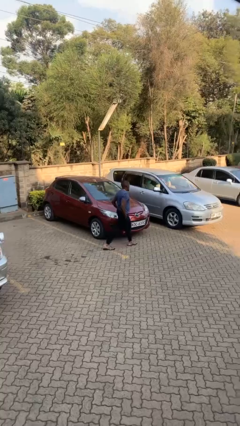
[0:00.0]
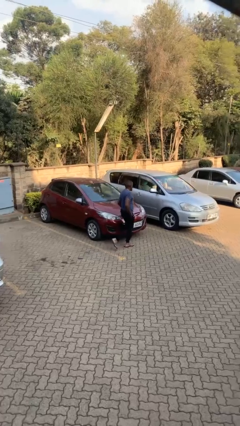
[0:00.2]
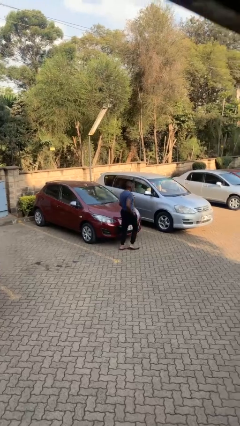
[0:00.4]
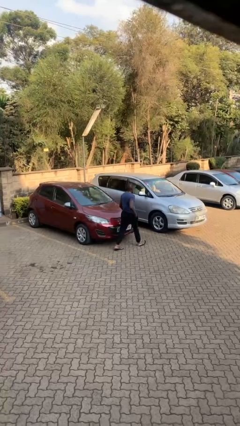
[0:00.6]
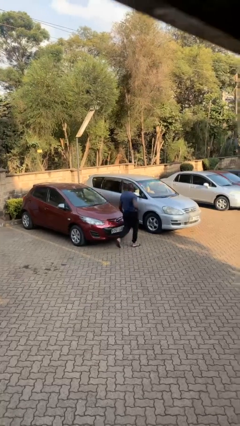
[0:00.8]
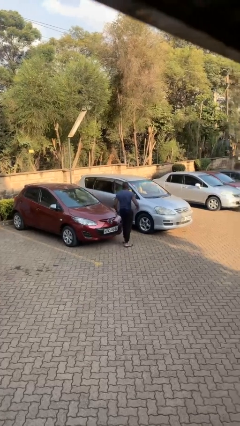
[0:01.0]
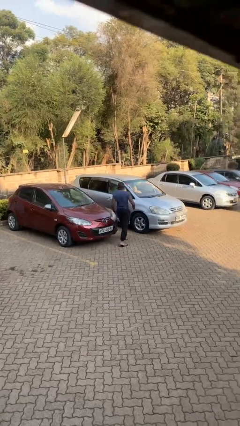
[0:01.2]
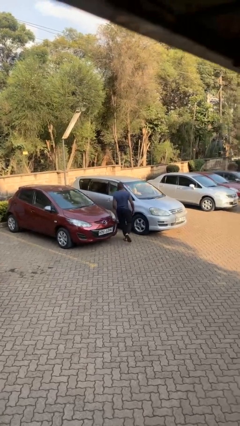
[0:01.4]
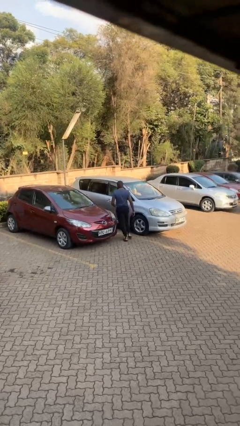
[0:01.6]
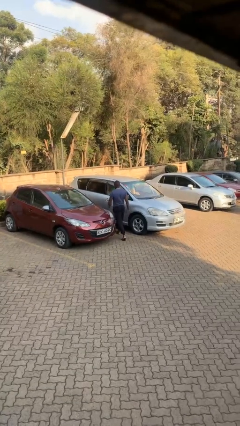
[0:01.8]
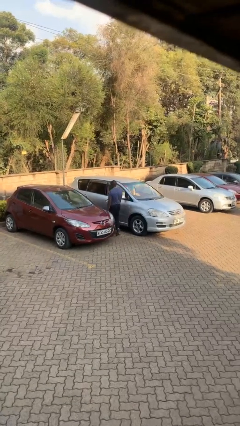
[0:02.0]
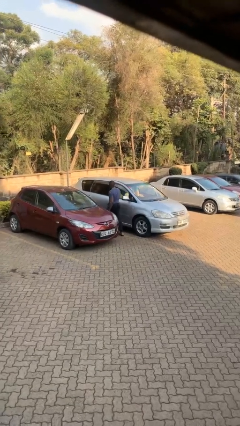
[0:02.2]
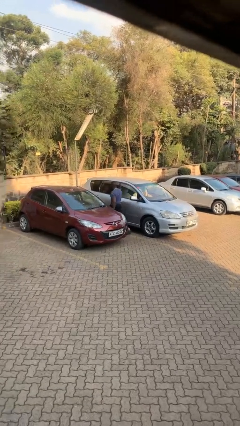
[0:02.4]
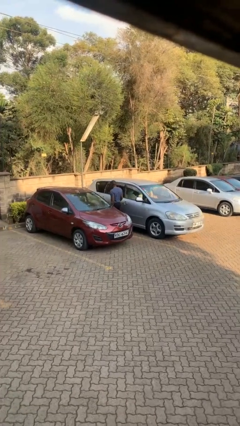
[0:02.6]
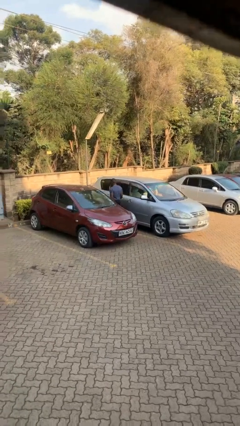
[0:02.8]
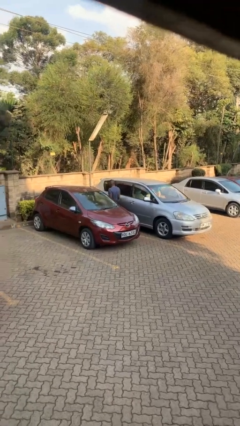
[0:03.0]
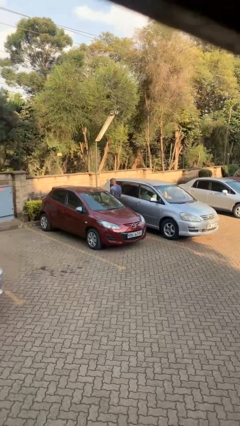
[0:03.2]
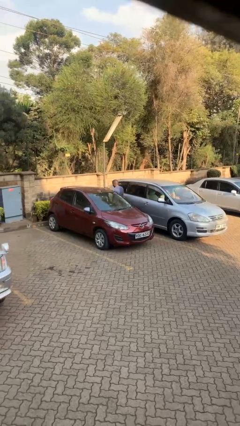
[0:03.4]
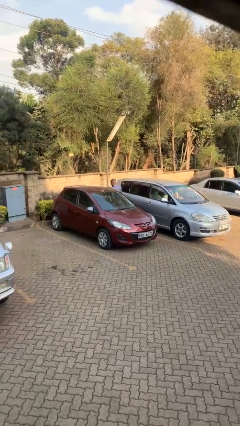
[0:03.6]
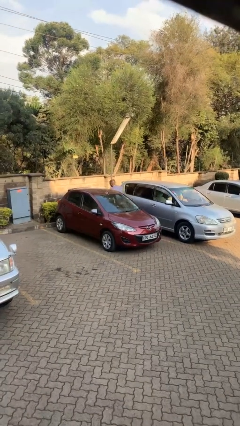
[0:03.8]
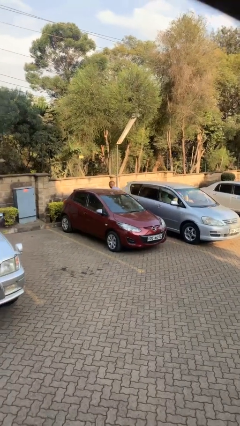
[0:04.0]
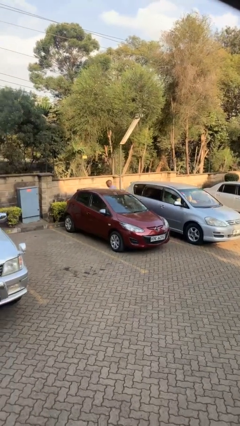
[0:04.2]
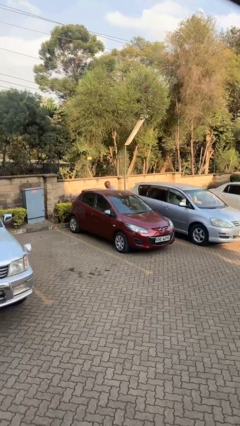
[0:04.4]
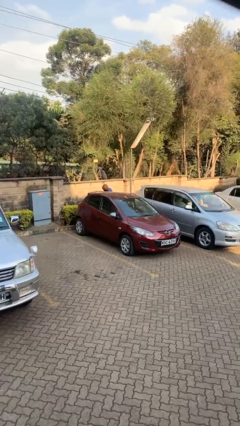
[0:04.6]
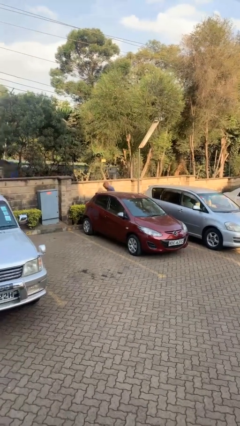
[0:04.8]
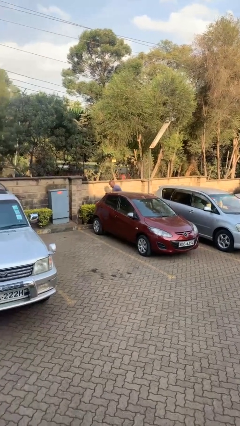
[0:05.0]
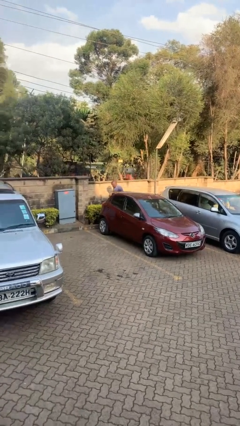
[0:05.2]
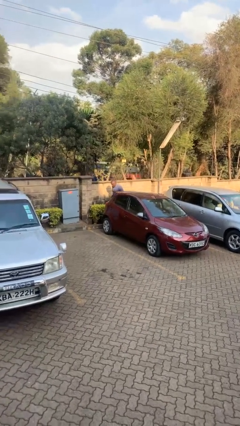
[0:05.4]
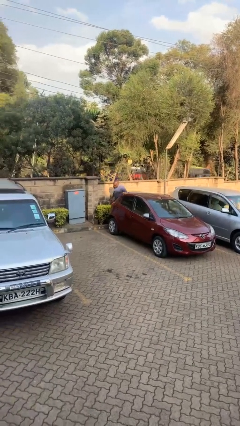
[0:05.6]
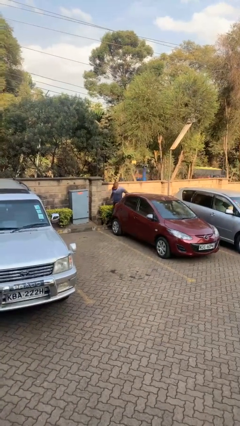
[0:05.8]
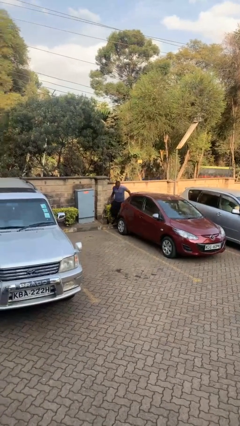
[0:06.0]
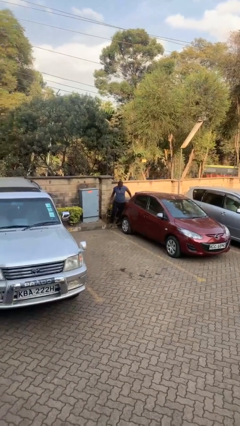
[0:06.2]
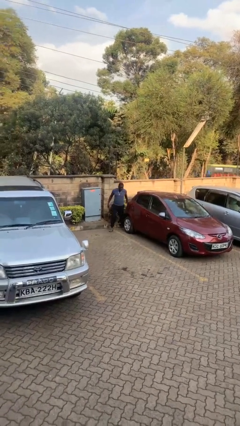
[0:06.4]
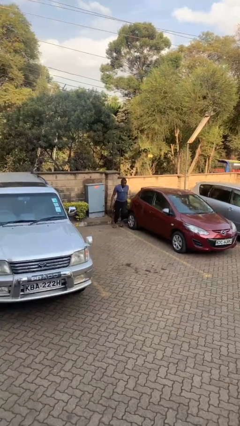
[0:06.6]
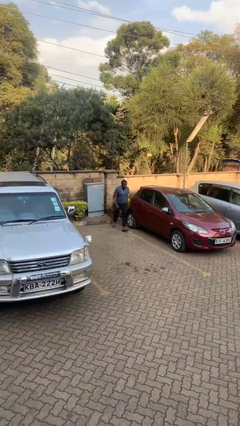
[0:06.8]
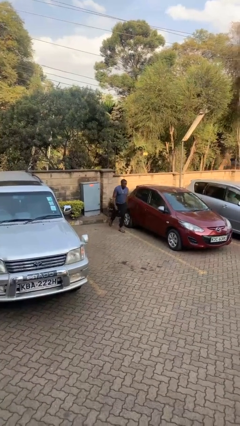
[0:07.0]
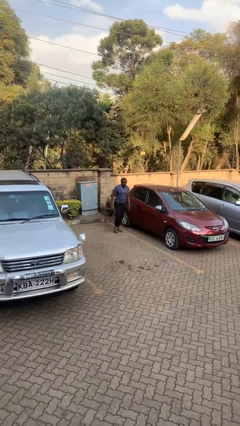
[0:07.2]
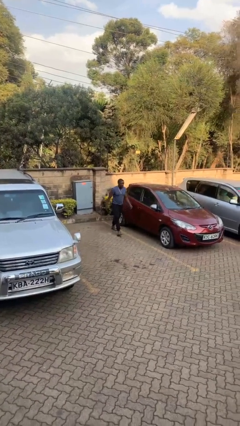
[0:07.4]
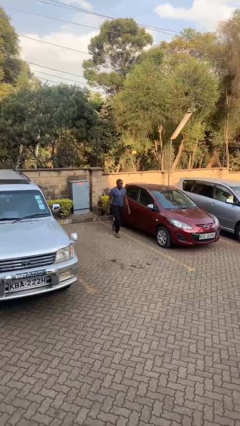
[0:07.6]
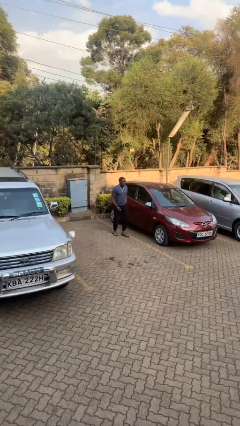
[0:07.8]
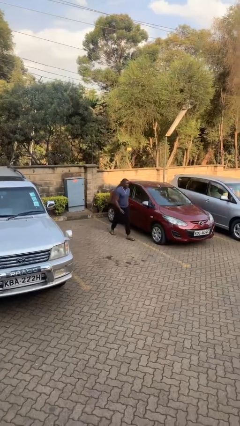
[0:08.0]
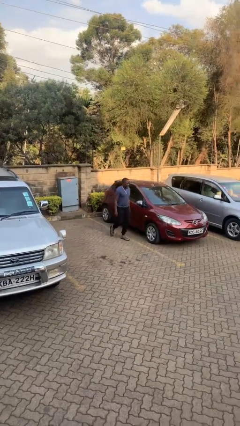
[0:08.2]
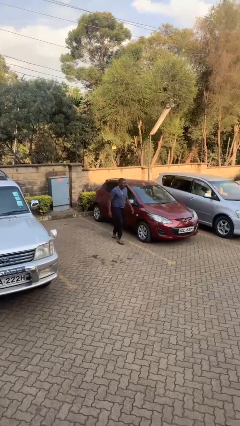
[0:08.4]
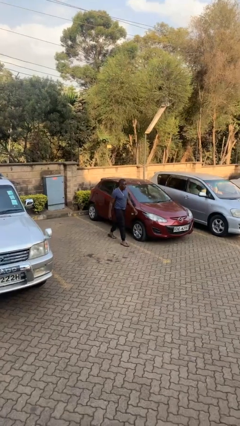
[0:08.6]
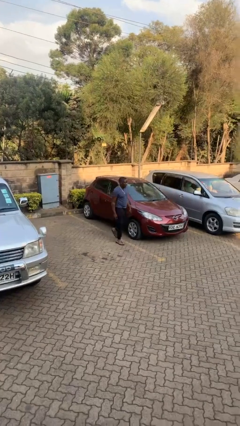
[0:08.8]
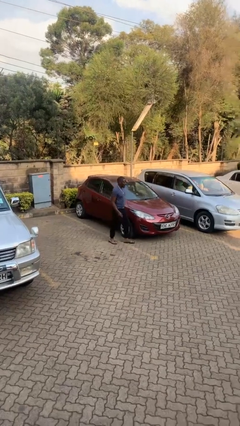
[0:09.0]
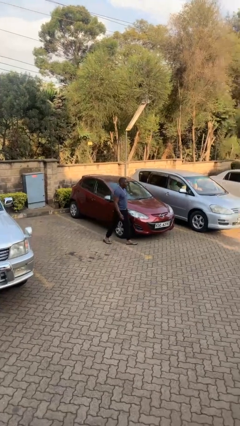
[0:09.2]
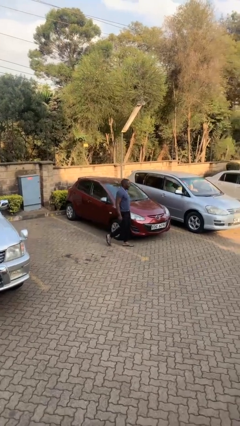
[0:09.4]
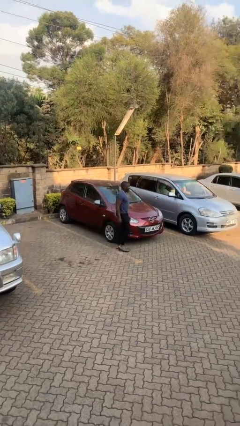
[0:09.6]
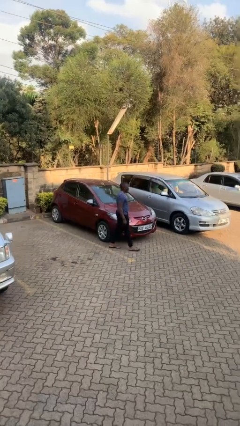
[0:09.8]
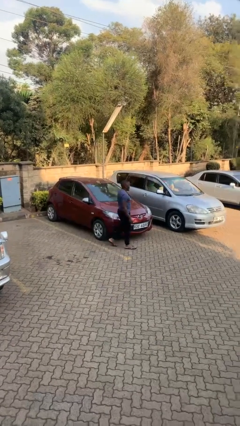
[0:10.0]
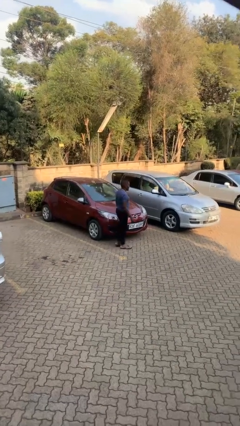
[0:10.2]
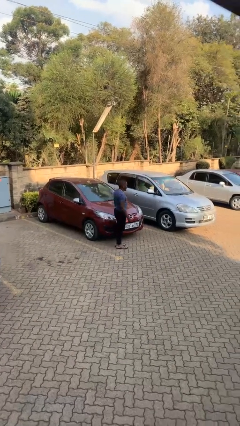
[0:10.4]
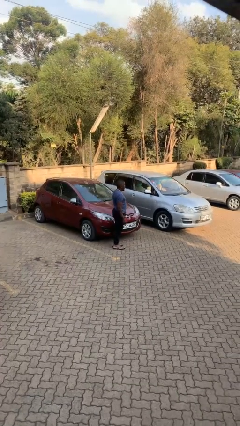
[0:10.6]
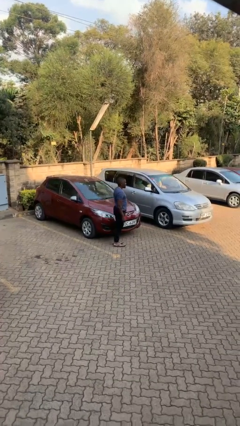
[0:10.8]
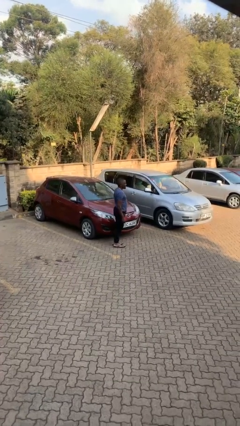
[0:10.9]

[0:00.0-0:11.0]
person walks around car

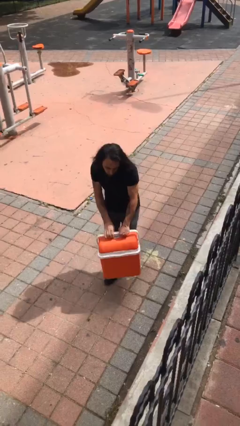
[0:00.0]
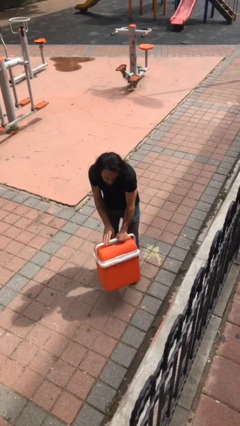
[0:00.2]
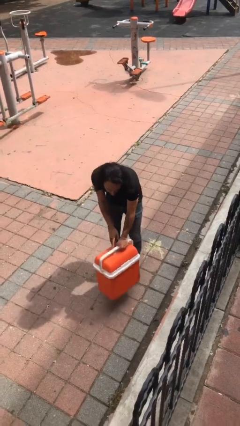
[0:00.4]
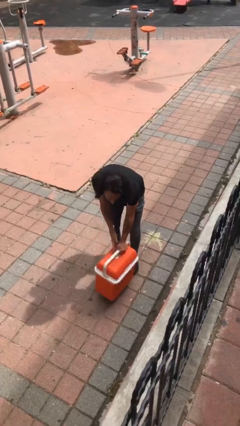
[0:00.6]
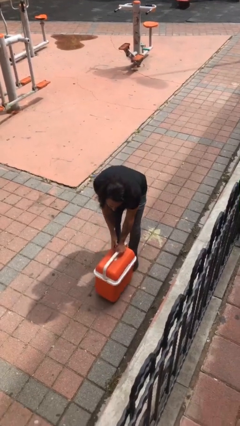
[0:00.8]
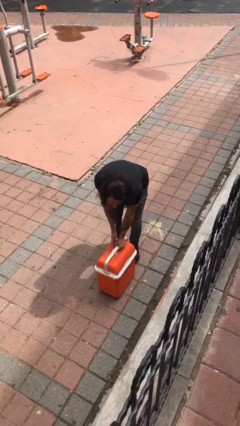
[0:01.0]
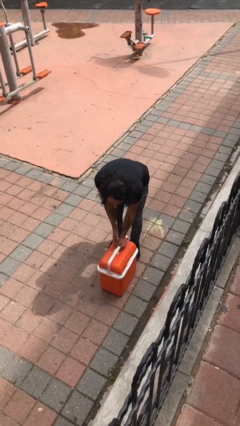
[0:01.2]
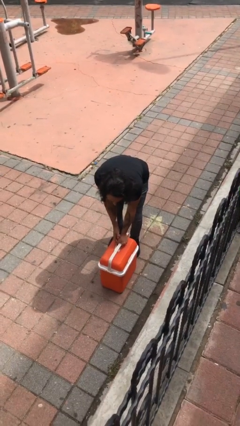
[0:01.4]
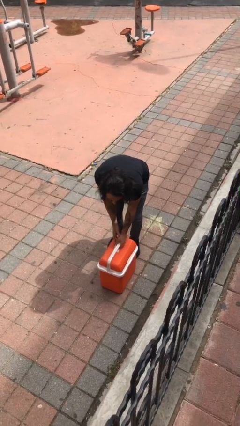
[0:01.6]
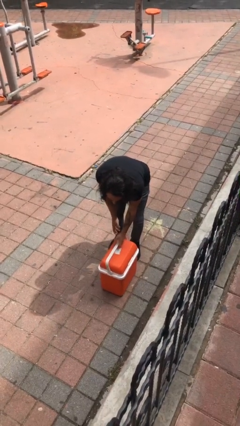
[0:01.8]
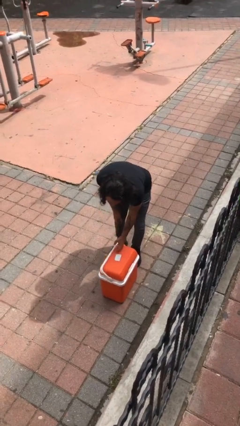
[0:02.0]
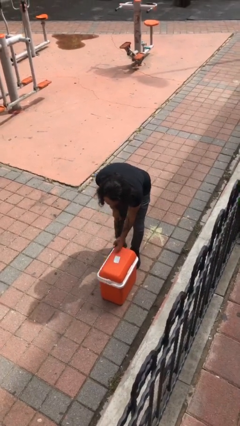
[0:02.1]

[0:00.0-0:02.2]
person puts down object on floor

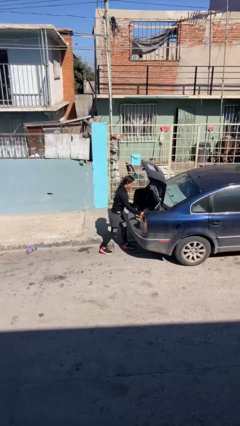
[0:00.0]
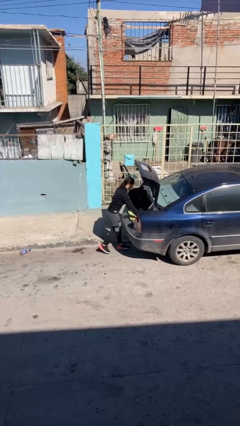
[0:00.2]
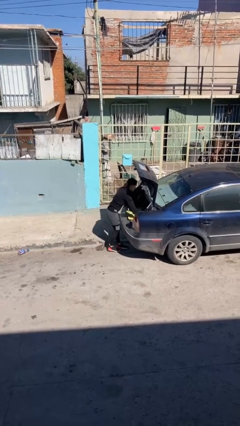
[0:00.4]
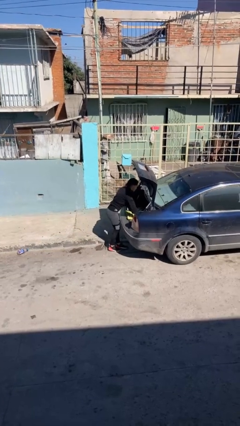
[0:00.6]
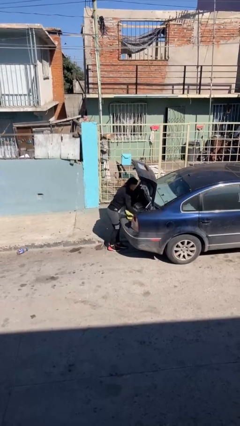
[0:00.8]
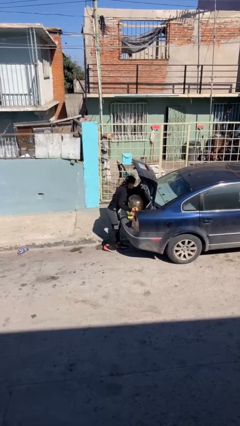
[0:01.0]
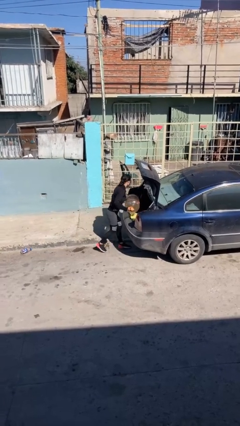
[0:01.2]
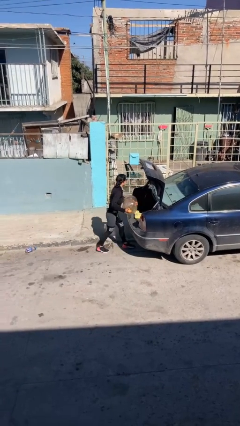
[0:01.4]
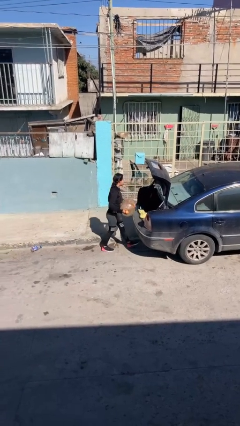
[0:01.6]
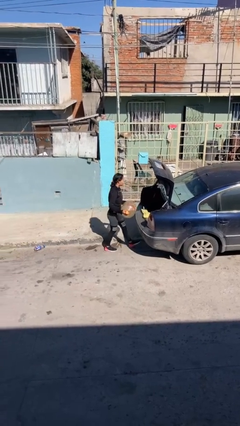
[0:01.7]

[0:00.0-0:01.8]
person unloads car

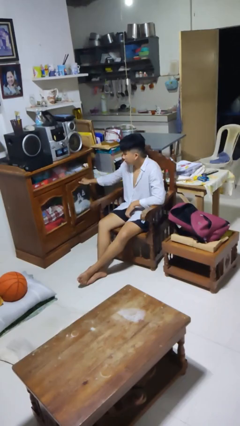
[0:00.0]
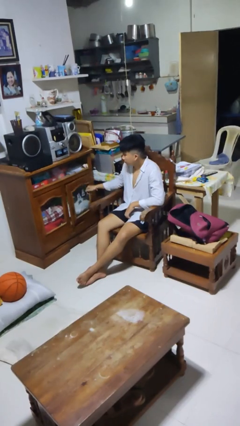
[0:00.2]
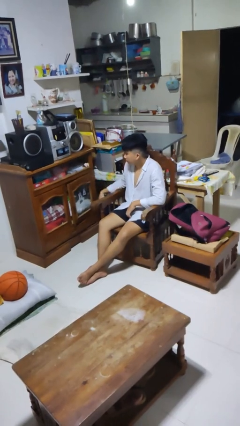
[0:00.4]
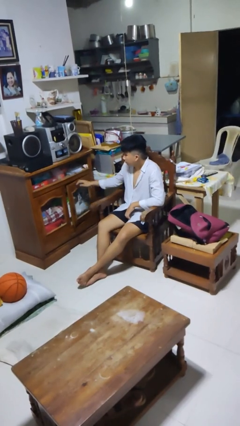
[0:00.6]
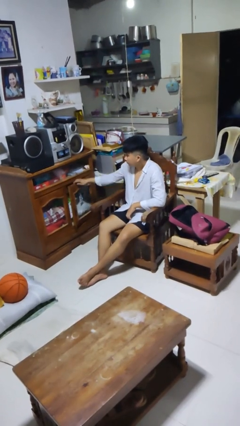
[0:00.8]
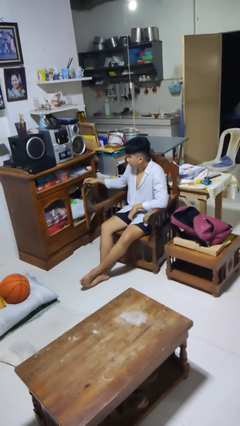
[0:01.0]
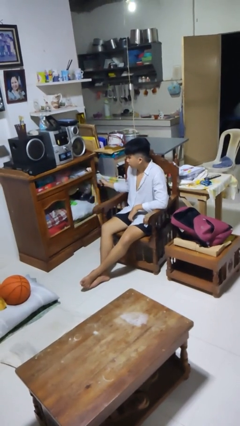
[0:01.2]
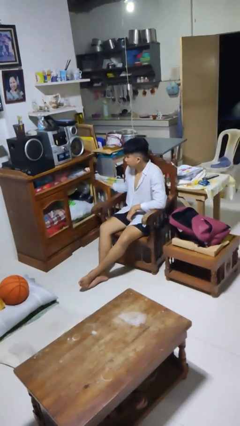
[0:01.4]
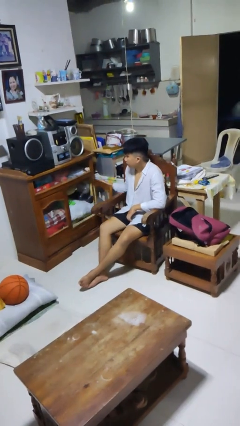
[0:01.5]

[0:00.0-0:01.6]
person opens dresser drawer

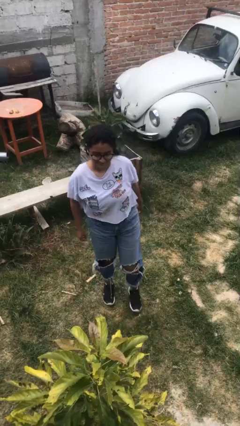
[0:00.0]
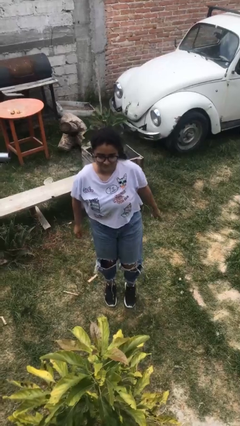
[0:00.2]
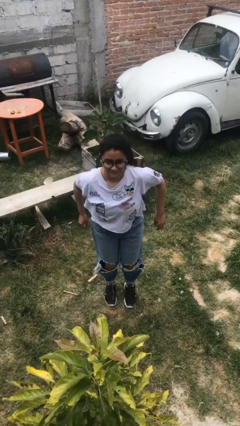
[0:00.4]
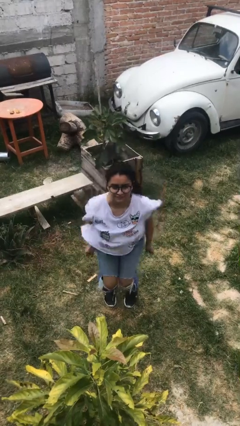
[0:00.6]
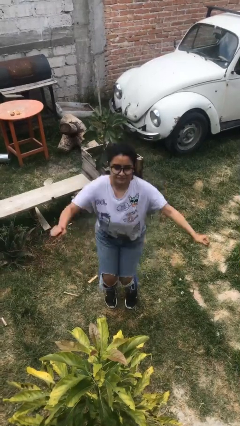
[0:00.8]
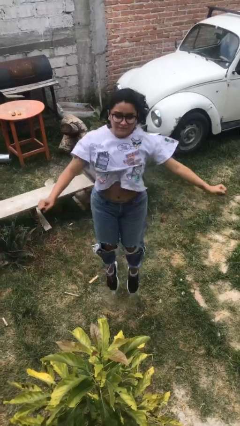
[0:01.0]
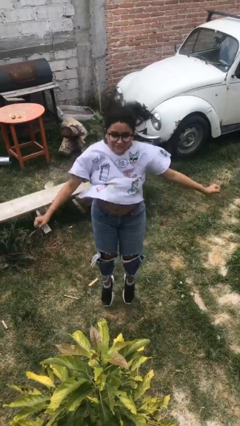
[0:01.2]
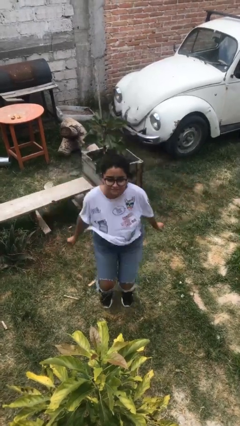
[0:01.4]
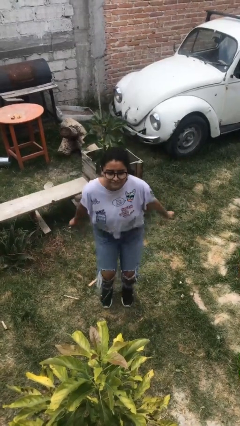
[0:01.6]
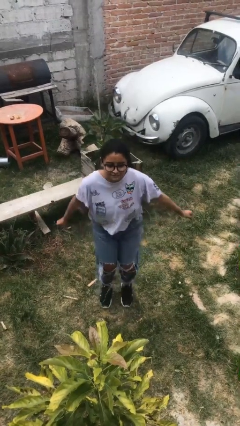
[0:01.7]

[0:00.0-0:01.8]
person jumps
